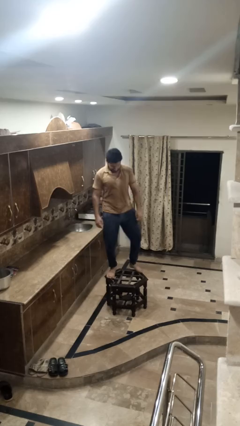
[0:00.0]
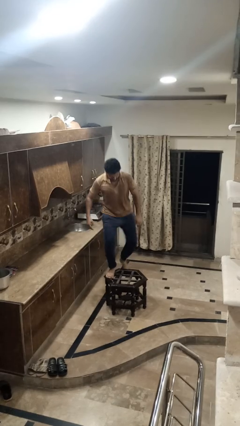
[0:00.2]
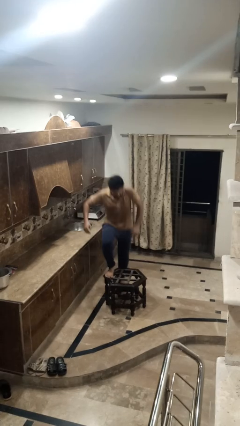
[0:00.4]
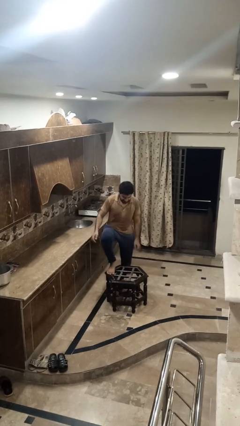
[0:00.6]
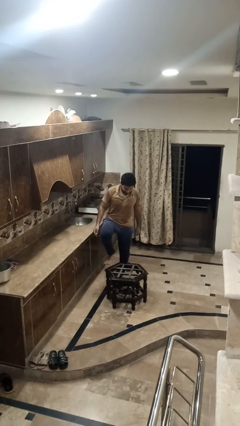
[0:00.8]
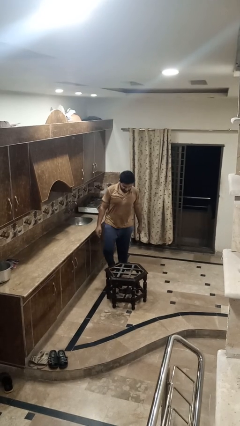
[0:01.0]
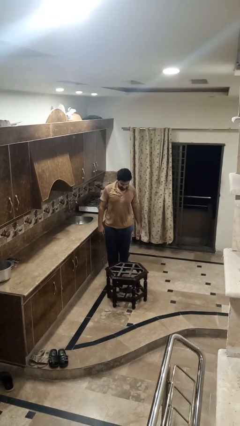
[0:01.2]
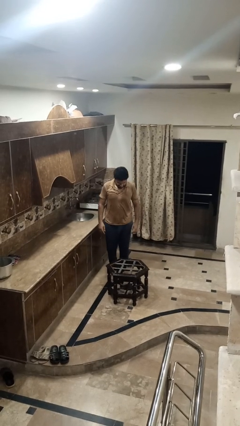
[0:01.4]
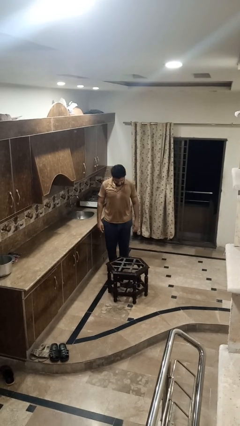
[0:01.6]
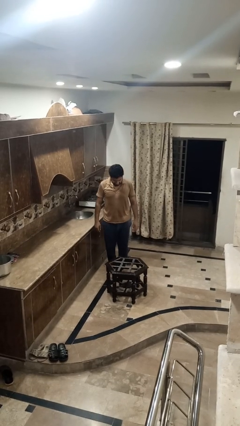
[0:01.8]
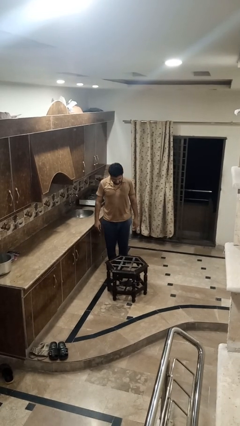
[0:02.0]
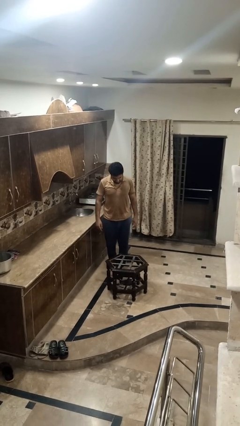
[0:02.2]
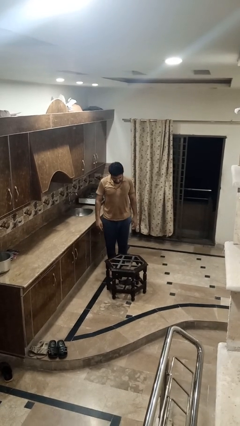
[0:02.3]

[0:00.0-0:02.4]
person climbs off table

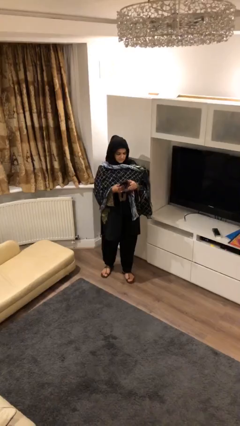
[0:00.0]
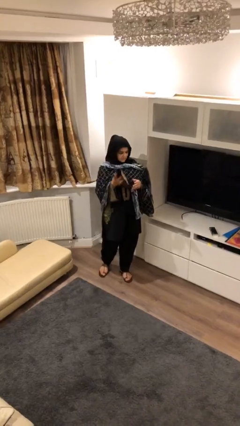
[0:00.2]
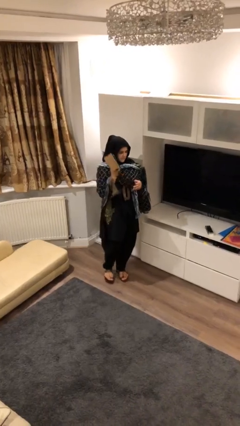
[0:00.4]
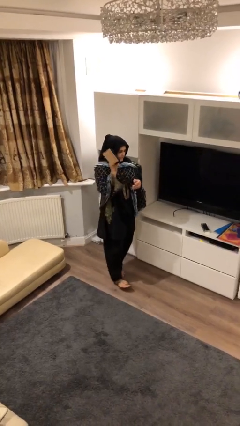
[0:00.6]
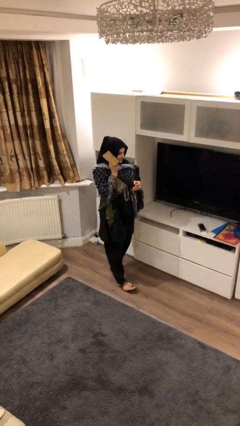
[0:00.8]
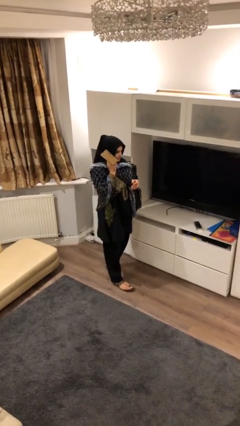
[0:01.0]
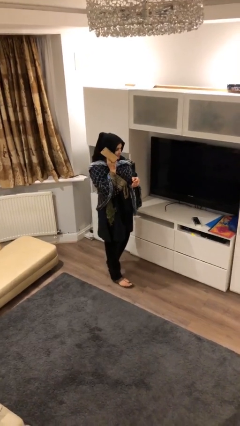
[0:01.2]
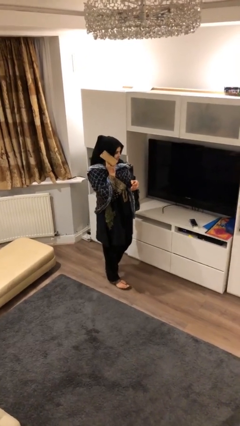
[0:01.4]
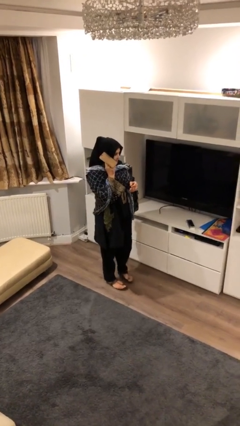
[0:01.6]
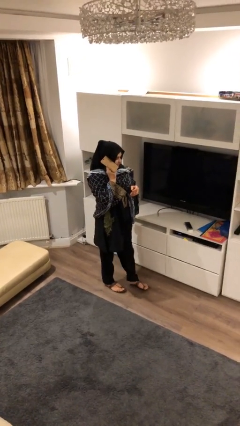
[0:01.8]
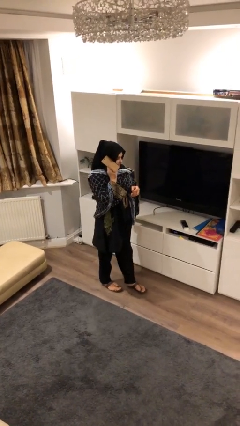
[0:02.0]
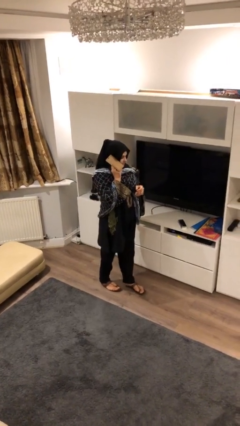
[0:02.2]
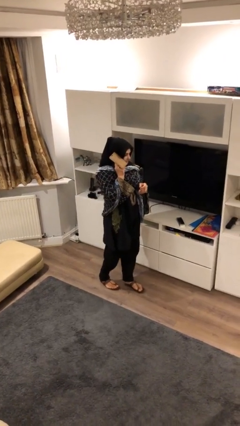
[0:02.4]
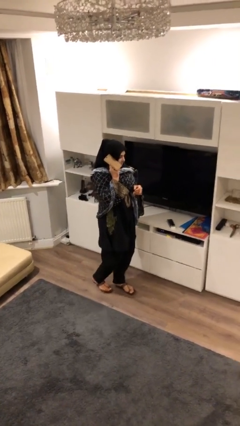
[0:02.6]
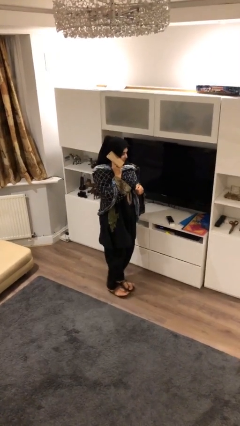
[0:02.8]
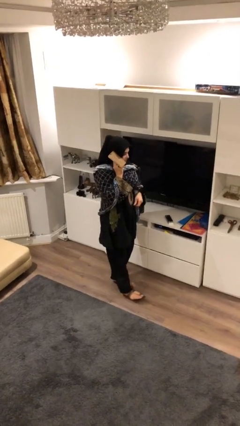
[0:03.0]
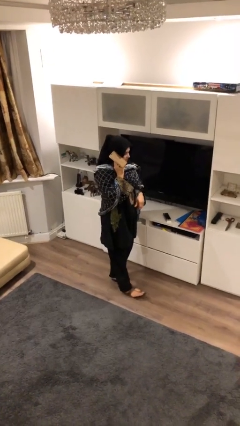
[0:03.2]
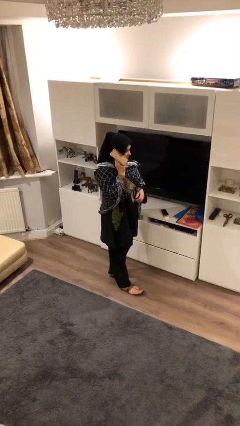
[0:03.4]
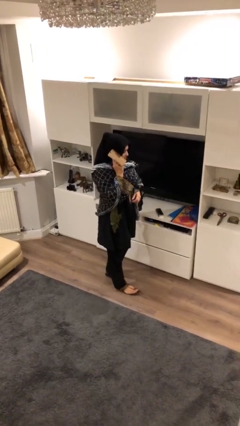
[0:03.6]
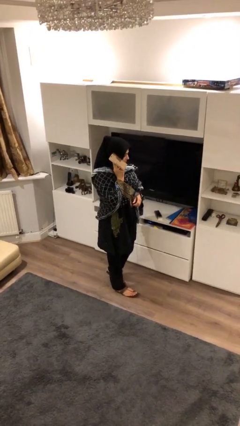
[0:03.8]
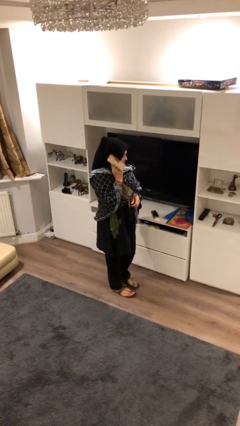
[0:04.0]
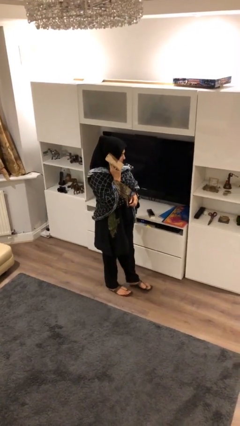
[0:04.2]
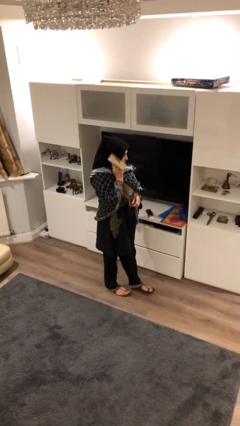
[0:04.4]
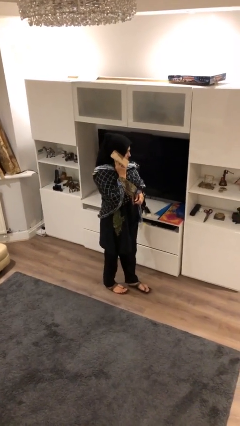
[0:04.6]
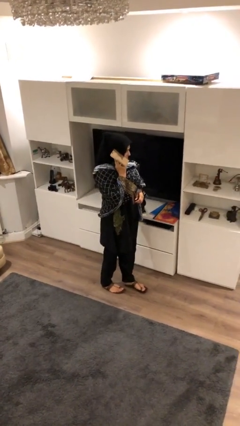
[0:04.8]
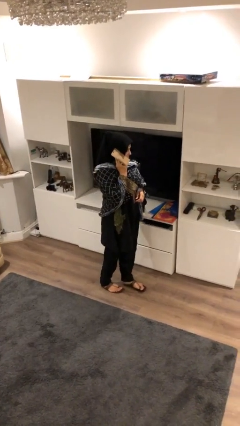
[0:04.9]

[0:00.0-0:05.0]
person talks on phone

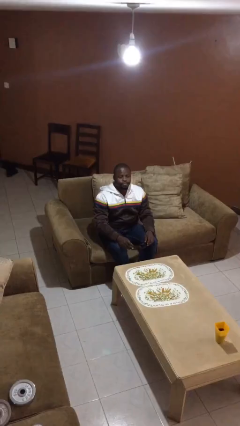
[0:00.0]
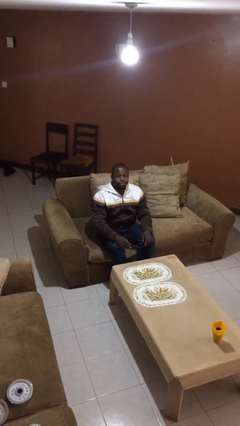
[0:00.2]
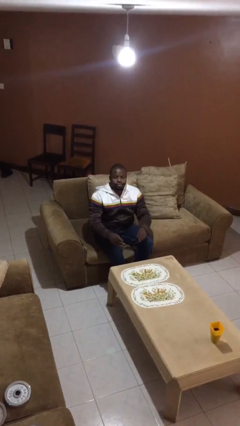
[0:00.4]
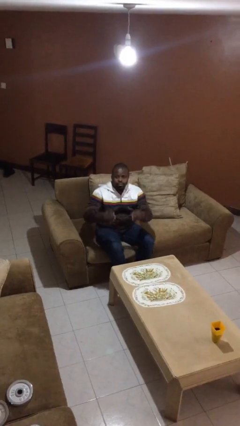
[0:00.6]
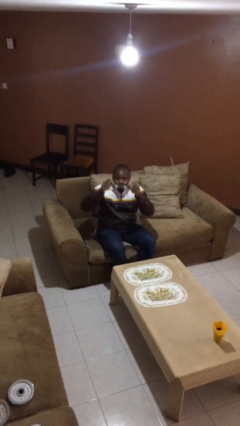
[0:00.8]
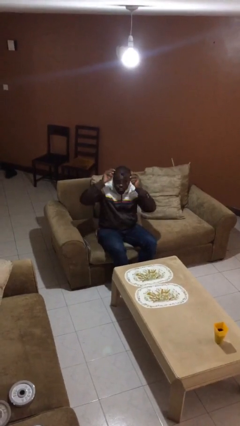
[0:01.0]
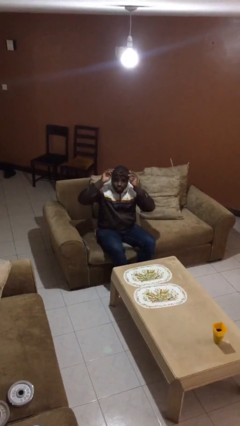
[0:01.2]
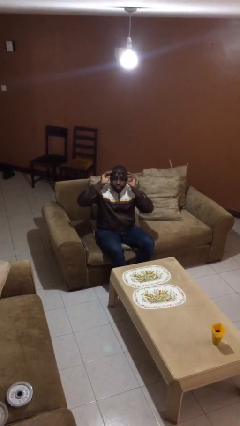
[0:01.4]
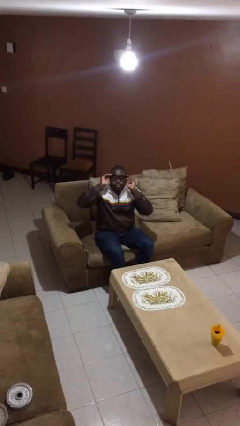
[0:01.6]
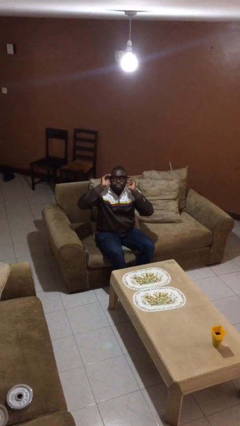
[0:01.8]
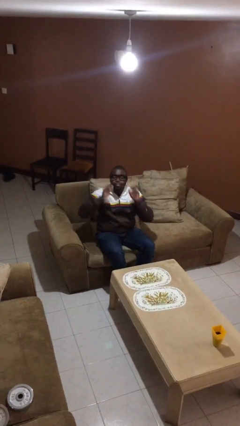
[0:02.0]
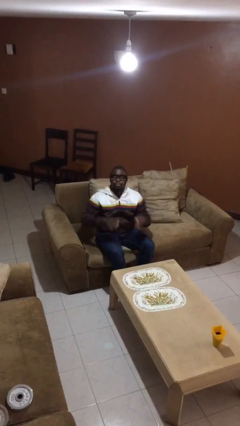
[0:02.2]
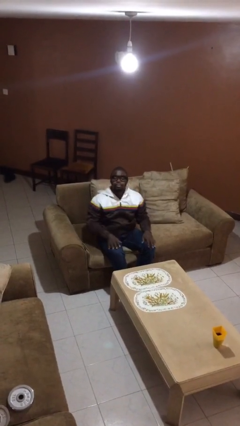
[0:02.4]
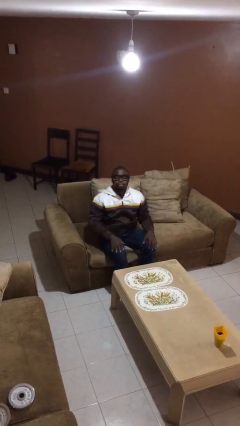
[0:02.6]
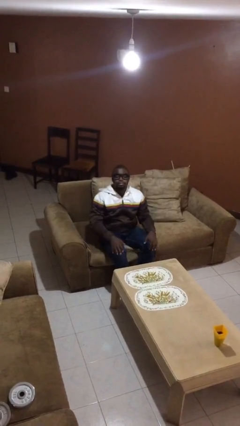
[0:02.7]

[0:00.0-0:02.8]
person puts on glasses

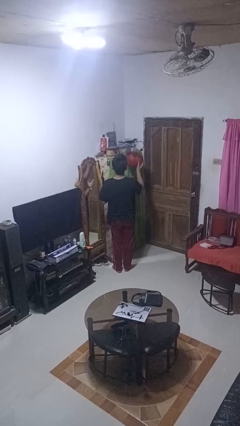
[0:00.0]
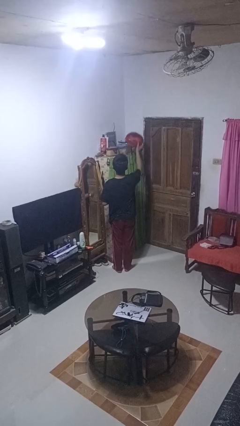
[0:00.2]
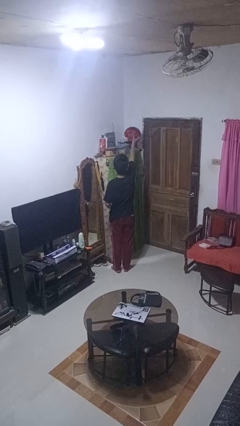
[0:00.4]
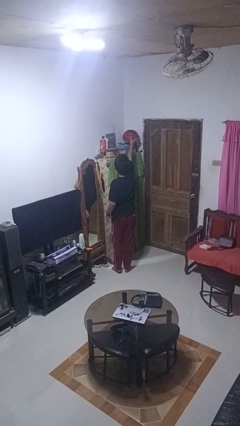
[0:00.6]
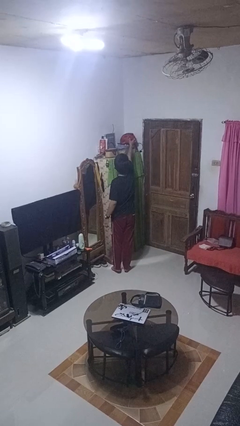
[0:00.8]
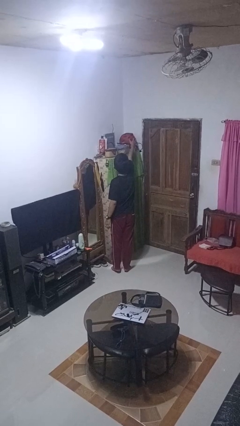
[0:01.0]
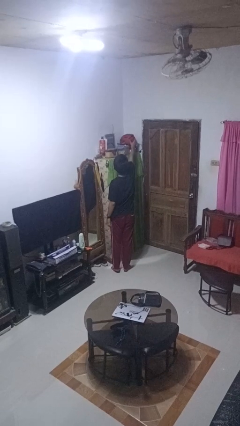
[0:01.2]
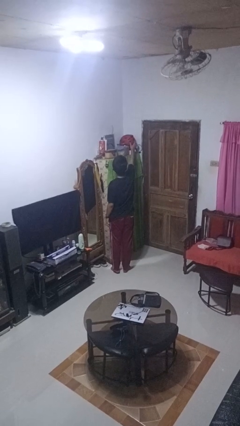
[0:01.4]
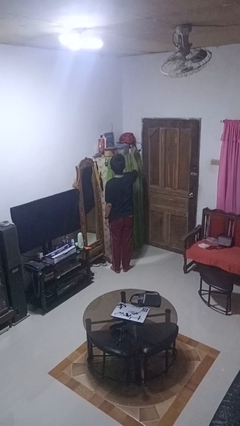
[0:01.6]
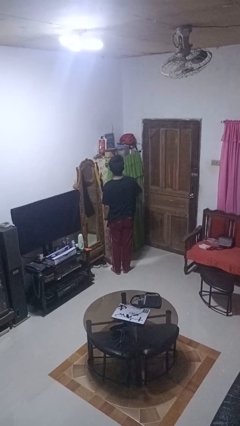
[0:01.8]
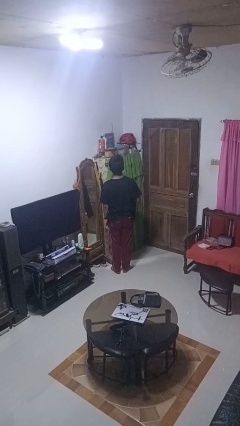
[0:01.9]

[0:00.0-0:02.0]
person puts down object on shelf

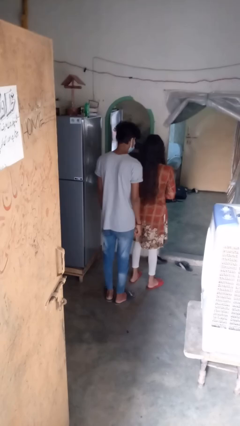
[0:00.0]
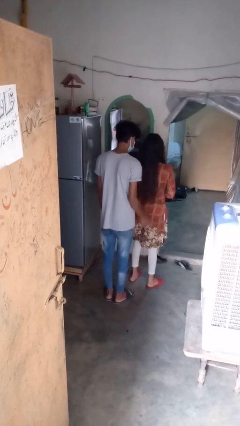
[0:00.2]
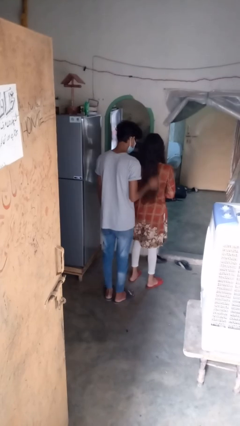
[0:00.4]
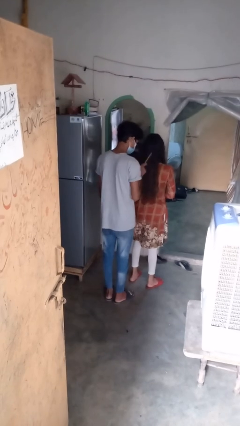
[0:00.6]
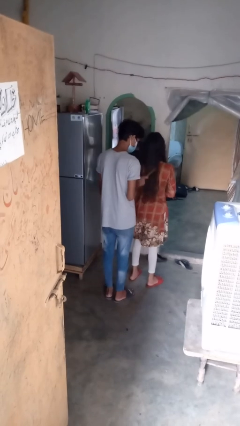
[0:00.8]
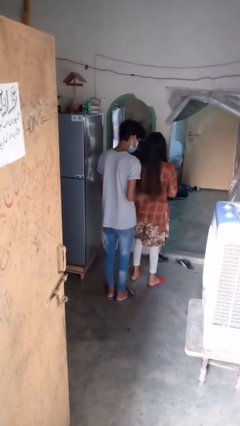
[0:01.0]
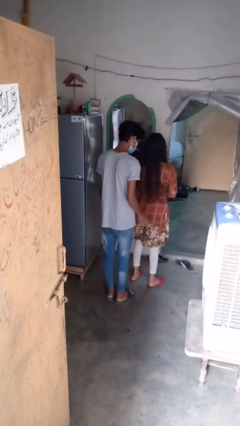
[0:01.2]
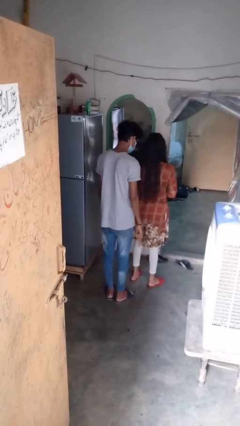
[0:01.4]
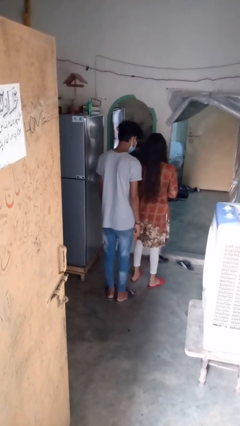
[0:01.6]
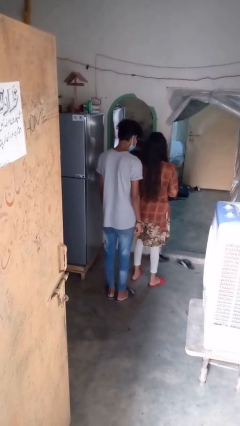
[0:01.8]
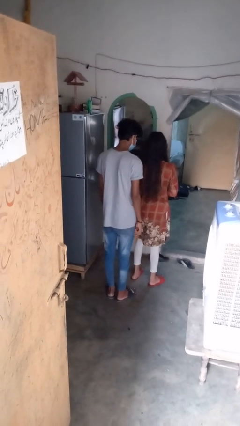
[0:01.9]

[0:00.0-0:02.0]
person brushes hair of person

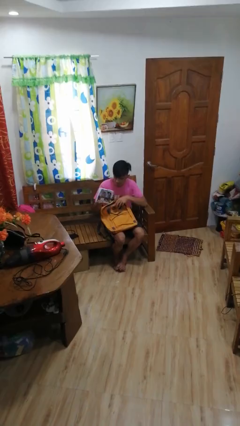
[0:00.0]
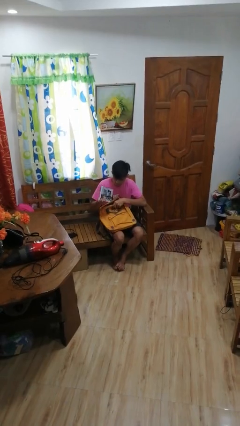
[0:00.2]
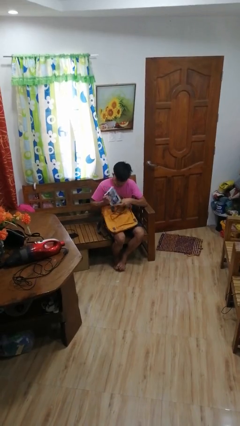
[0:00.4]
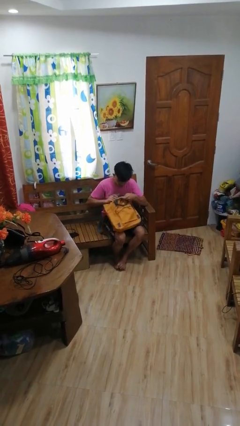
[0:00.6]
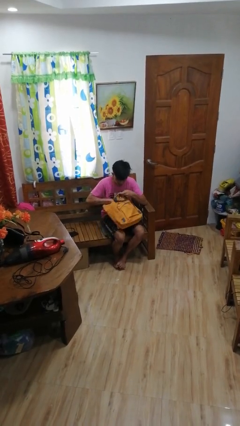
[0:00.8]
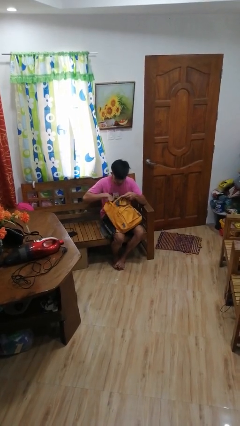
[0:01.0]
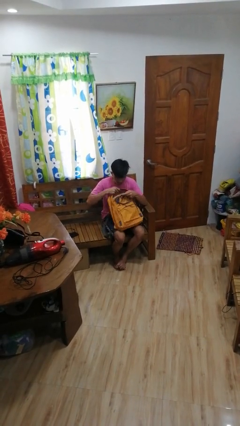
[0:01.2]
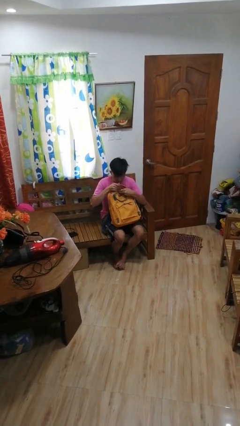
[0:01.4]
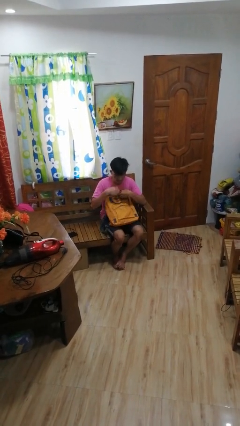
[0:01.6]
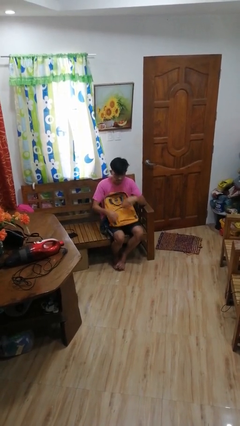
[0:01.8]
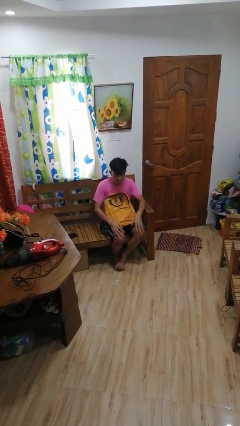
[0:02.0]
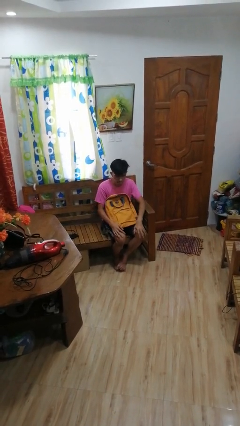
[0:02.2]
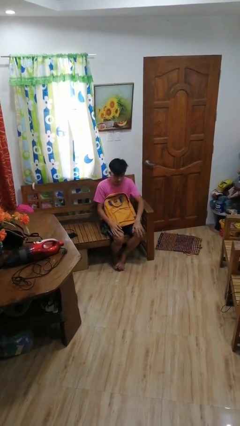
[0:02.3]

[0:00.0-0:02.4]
person puts object into backpack

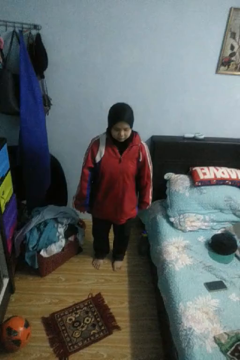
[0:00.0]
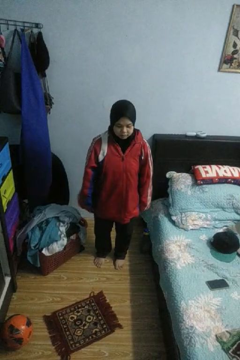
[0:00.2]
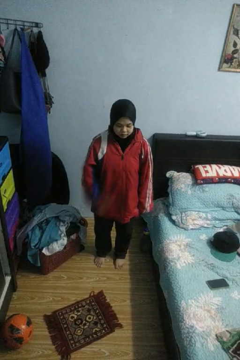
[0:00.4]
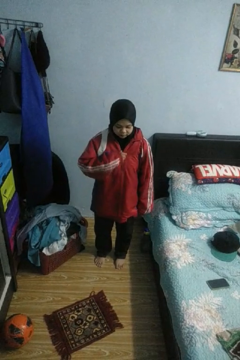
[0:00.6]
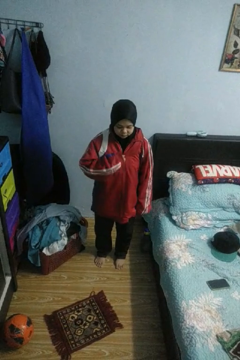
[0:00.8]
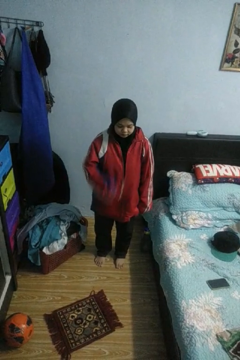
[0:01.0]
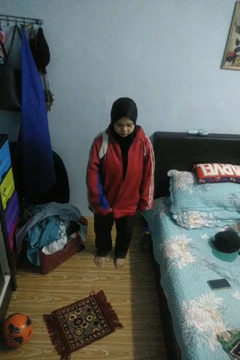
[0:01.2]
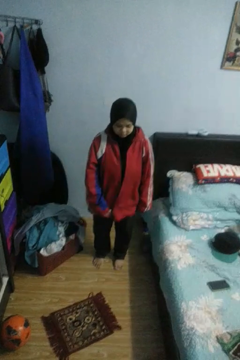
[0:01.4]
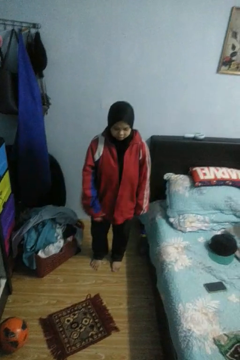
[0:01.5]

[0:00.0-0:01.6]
person unzips jacket
